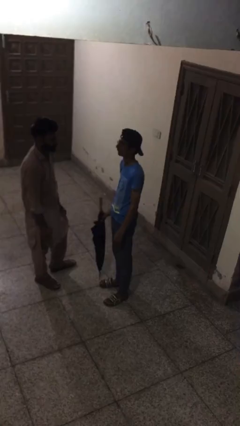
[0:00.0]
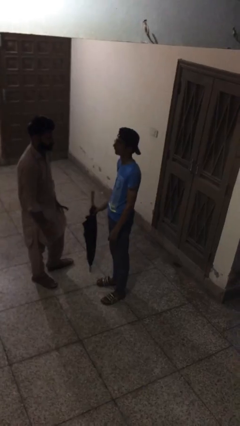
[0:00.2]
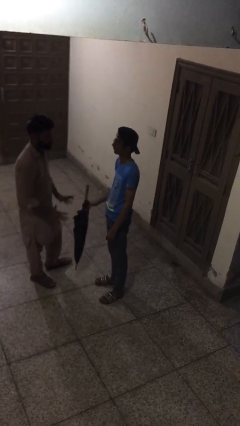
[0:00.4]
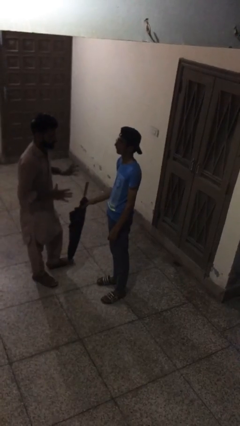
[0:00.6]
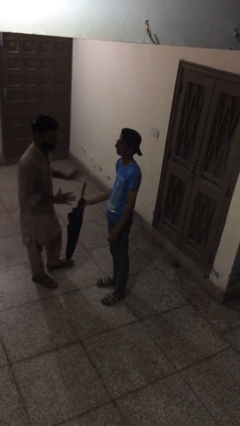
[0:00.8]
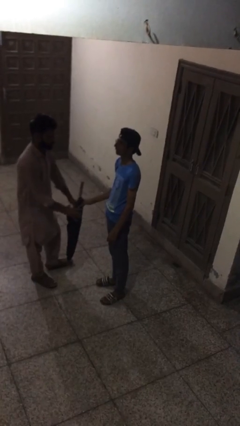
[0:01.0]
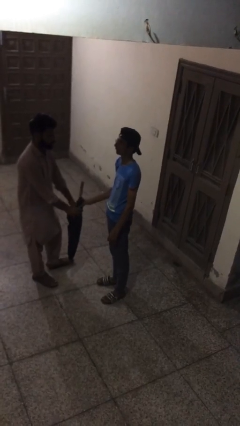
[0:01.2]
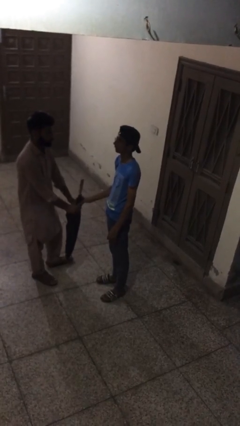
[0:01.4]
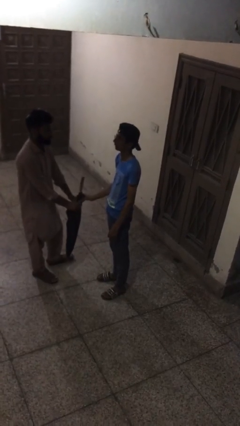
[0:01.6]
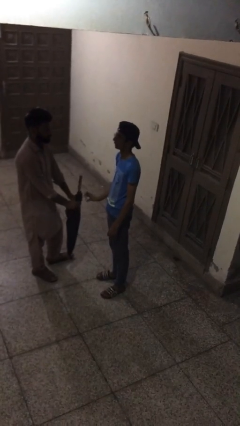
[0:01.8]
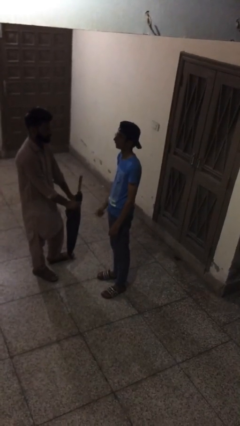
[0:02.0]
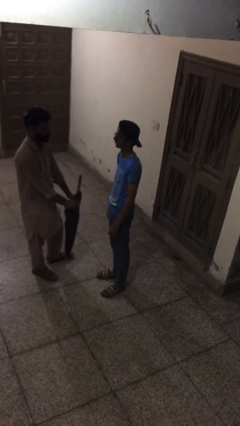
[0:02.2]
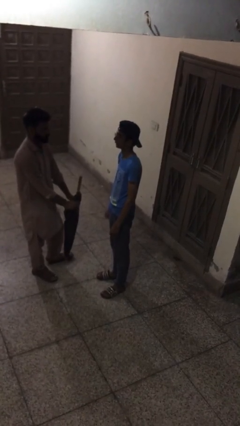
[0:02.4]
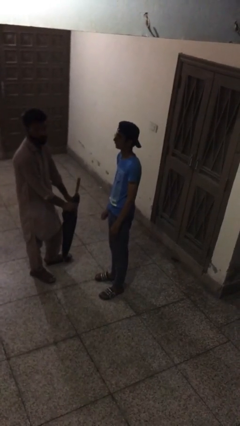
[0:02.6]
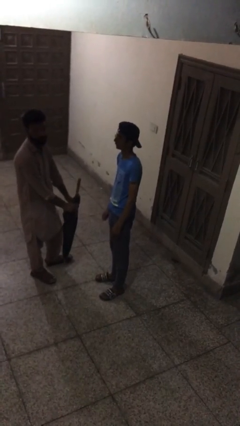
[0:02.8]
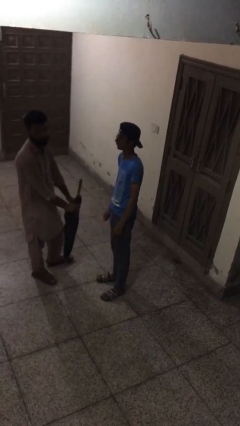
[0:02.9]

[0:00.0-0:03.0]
person transfers object to person

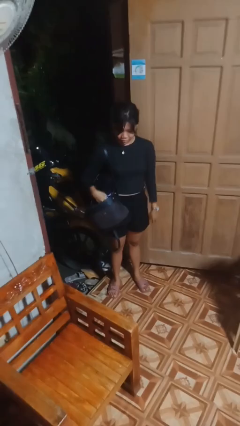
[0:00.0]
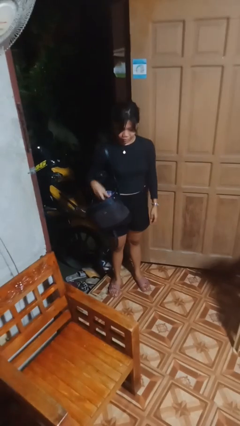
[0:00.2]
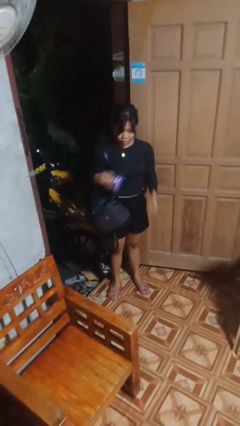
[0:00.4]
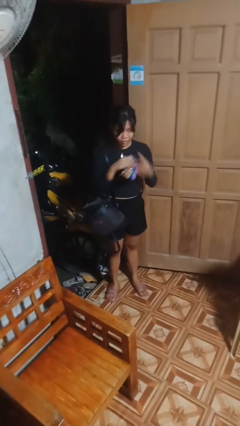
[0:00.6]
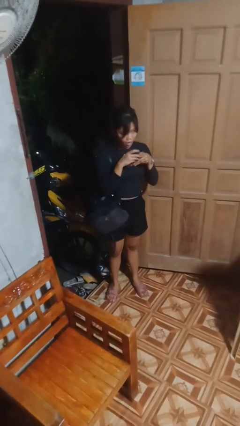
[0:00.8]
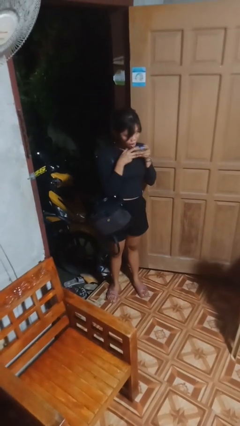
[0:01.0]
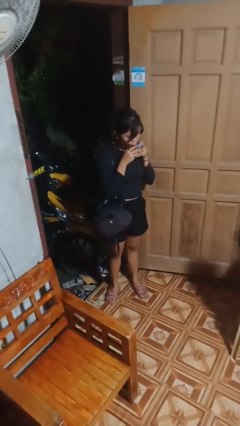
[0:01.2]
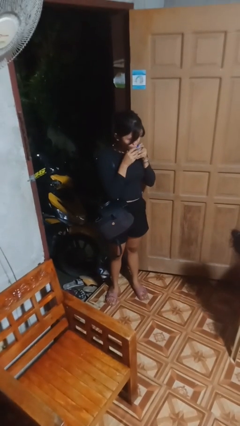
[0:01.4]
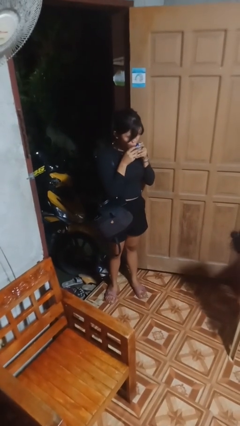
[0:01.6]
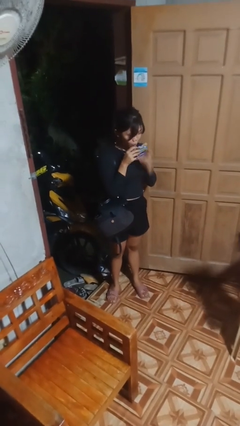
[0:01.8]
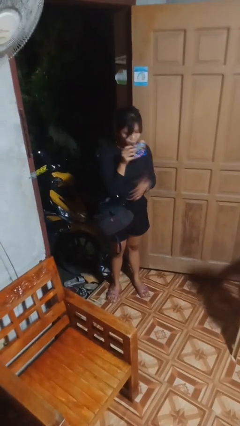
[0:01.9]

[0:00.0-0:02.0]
person eats snack from bag

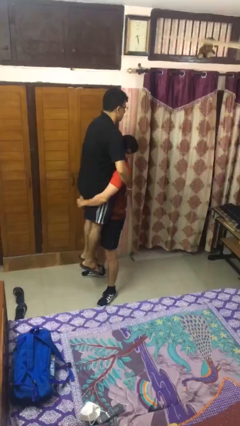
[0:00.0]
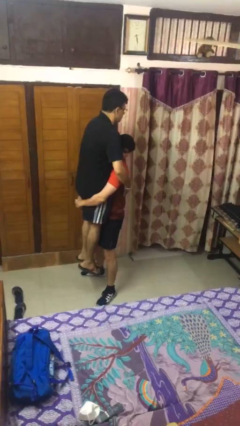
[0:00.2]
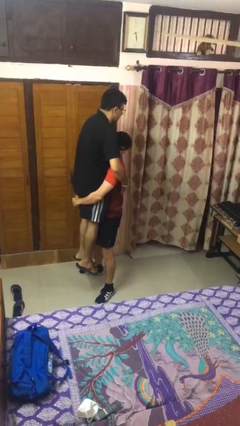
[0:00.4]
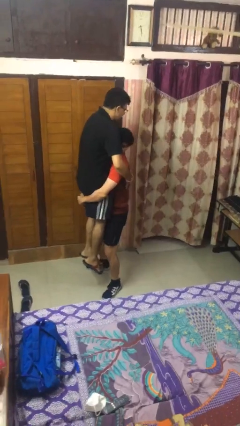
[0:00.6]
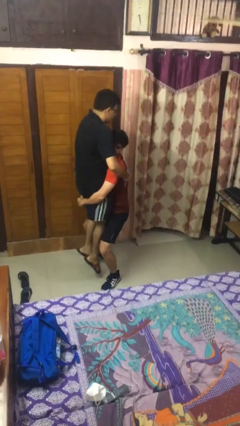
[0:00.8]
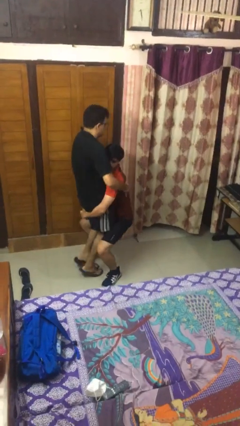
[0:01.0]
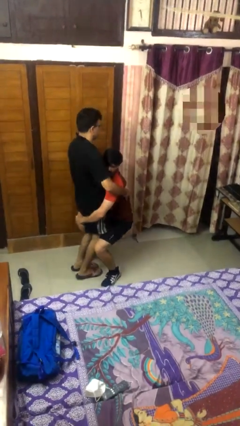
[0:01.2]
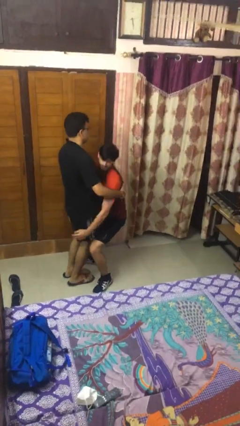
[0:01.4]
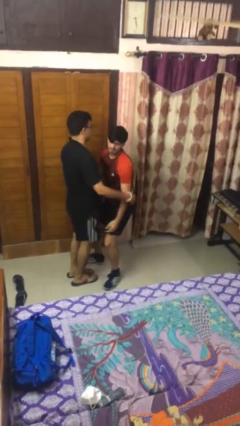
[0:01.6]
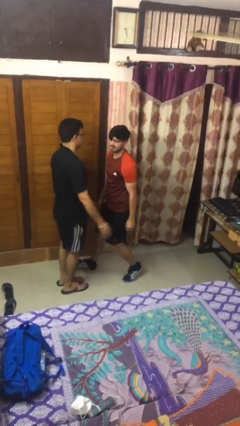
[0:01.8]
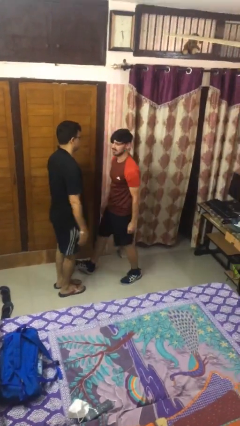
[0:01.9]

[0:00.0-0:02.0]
person puts down person

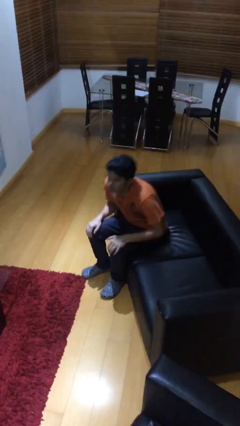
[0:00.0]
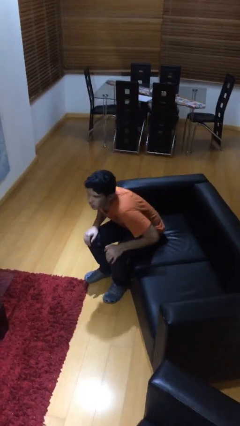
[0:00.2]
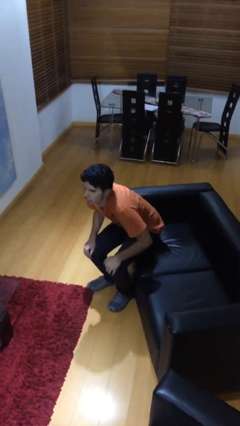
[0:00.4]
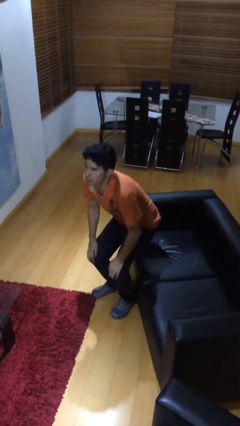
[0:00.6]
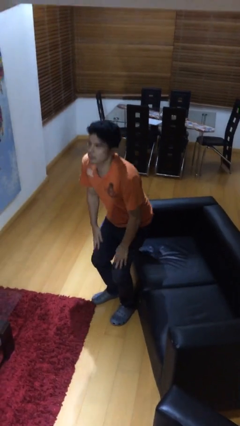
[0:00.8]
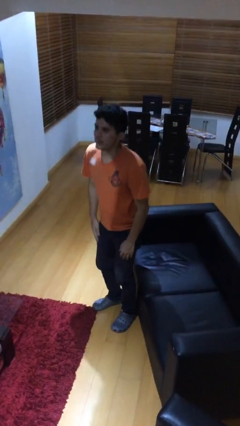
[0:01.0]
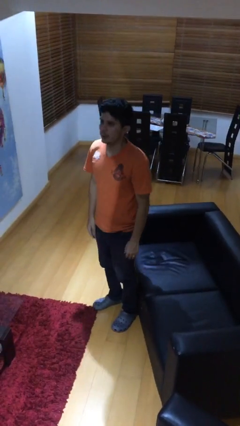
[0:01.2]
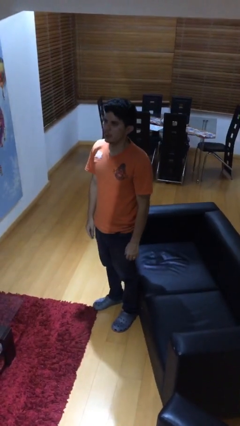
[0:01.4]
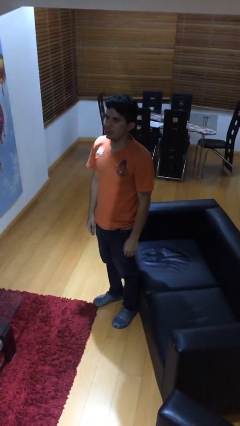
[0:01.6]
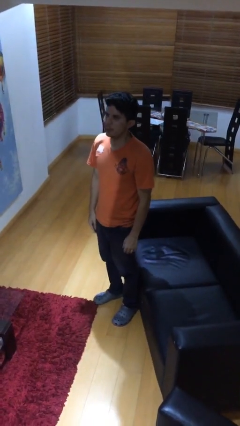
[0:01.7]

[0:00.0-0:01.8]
person stands up

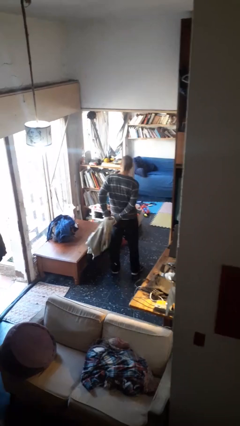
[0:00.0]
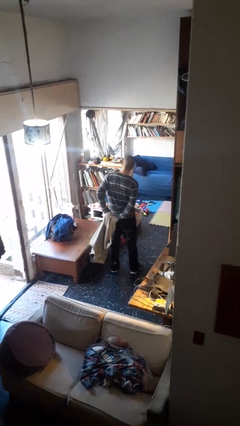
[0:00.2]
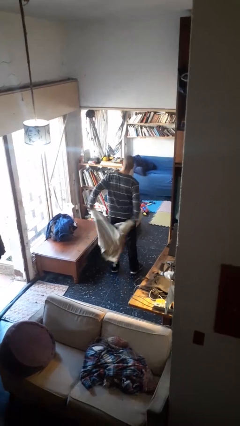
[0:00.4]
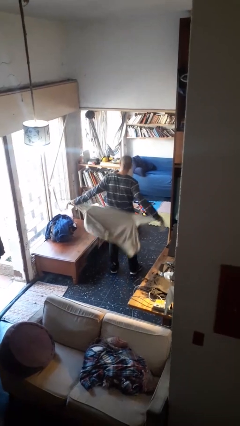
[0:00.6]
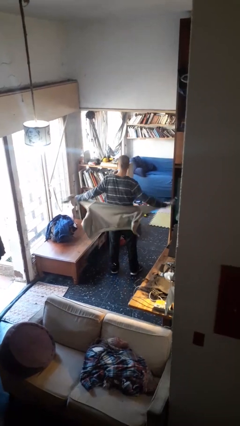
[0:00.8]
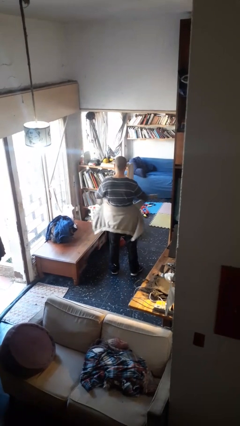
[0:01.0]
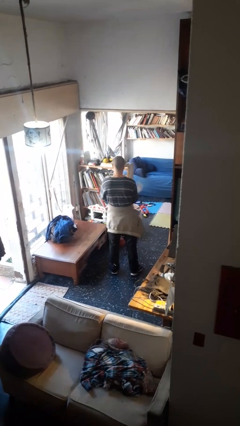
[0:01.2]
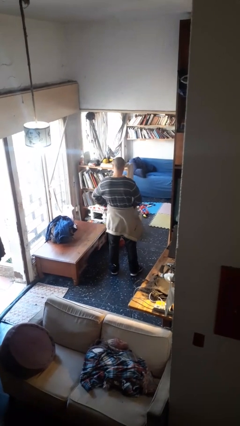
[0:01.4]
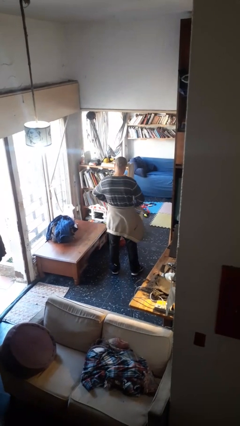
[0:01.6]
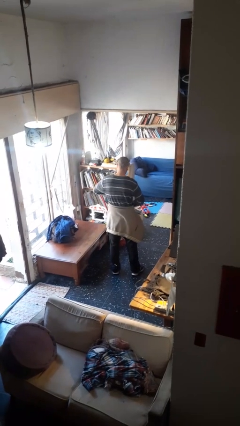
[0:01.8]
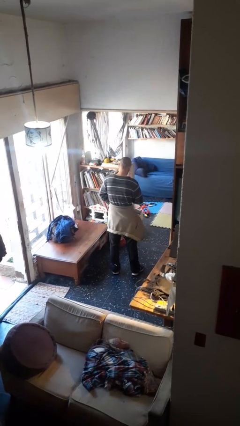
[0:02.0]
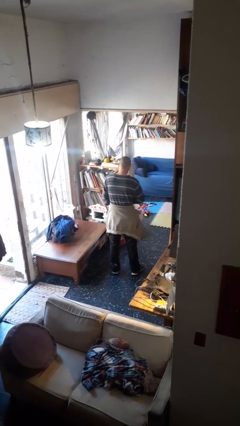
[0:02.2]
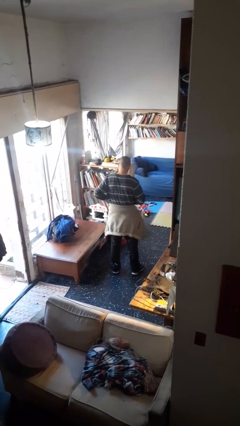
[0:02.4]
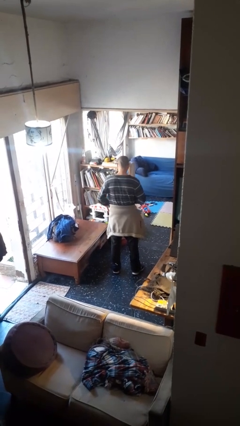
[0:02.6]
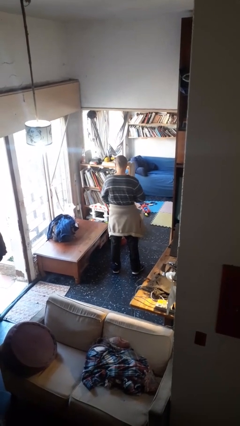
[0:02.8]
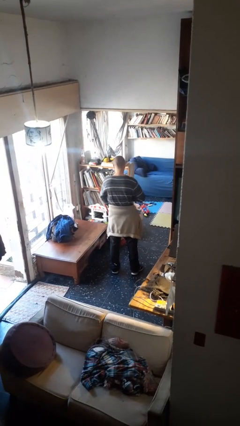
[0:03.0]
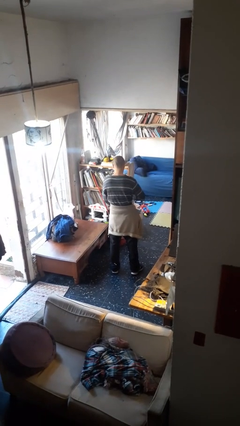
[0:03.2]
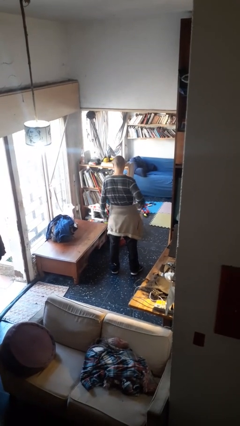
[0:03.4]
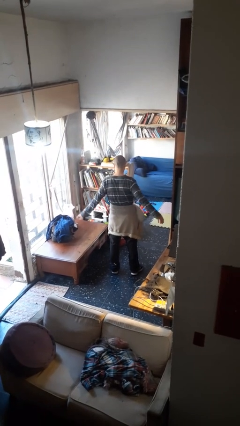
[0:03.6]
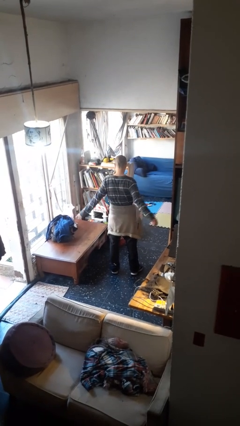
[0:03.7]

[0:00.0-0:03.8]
person ties jacket around waist

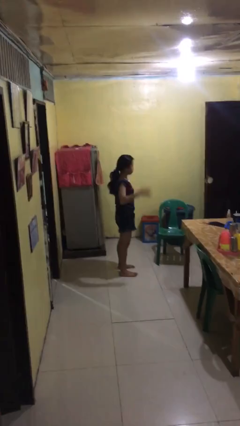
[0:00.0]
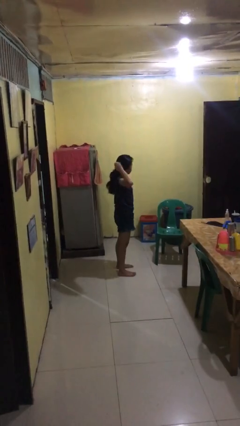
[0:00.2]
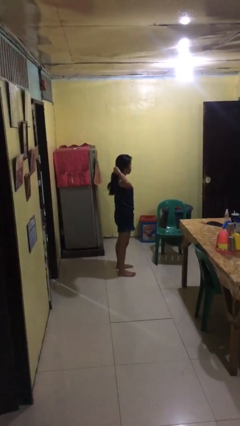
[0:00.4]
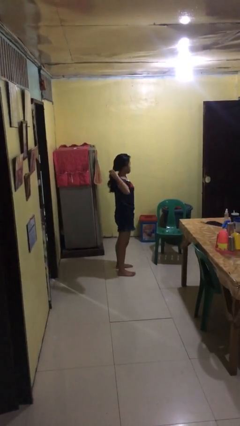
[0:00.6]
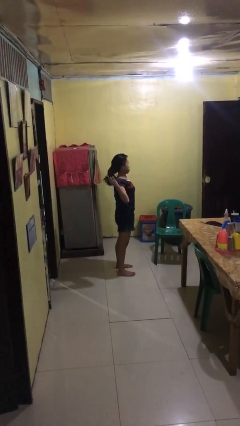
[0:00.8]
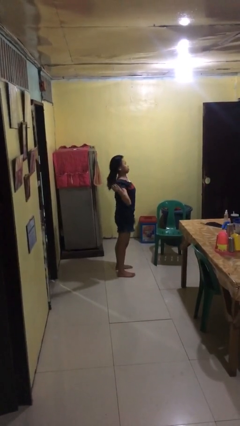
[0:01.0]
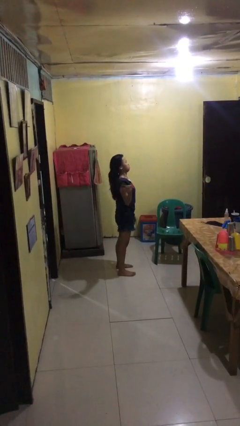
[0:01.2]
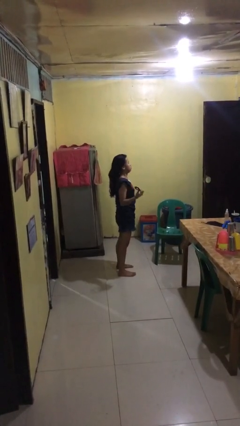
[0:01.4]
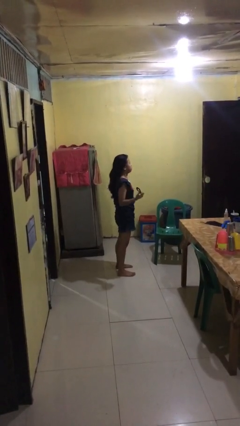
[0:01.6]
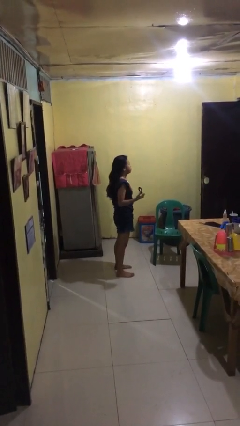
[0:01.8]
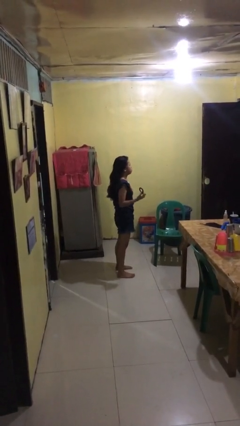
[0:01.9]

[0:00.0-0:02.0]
person takes off hairtie

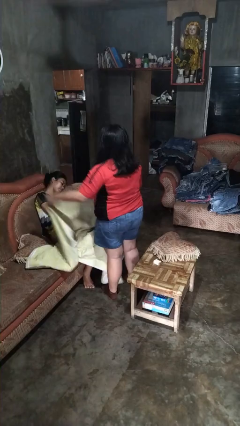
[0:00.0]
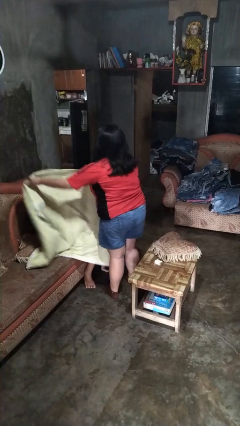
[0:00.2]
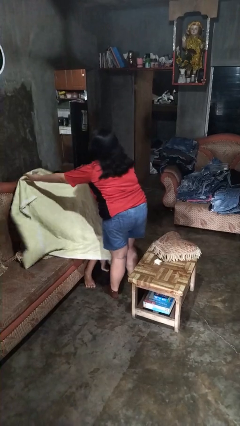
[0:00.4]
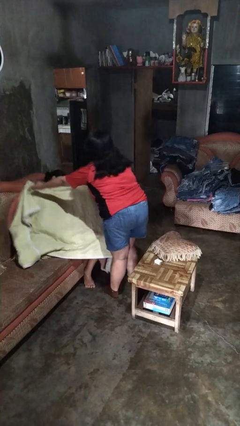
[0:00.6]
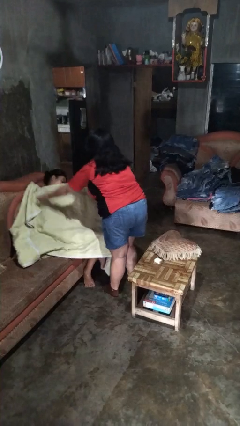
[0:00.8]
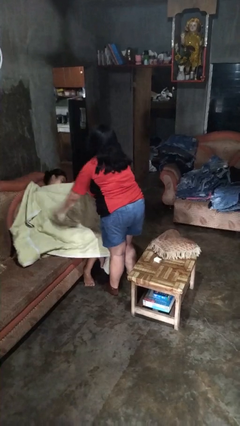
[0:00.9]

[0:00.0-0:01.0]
person covers friend with blanket

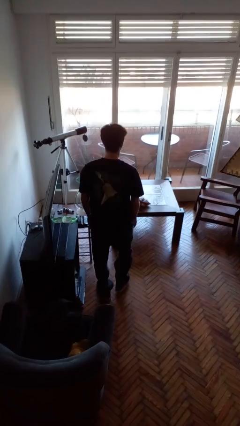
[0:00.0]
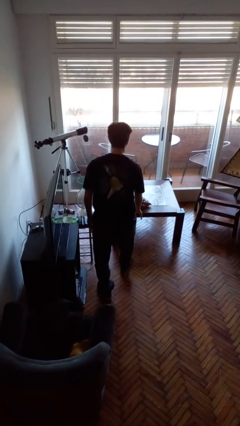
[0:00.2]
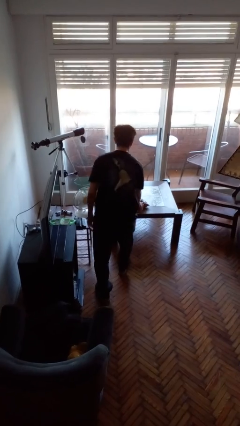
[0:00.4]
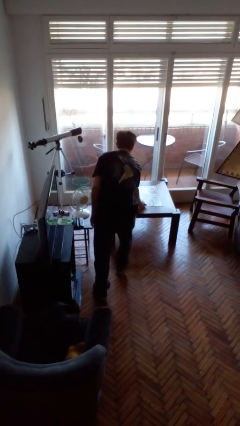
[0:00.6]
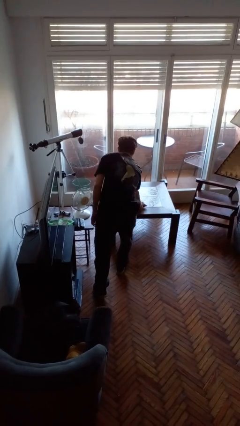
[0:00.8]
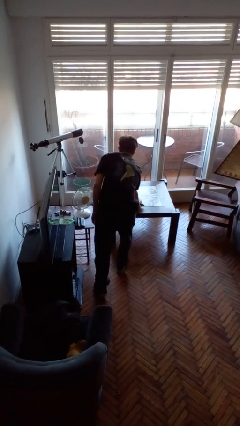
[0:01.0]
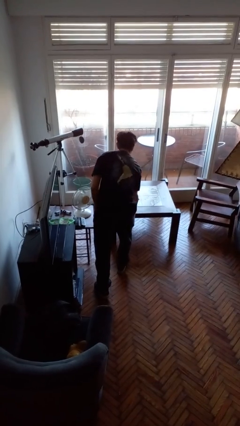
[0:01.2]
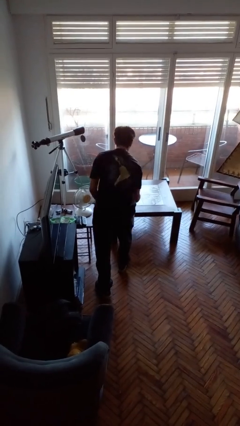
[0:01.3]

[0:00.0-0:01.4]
person picks up object from table
